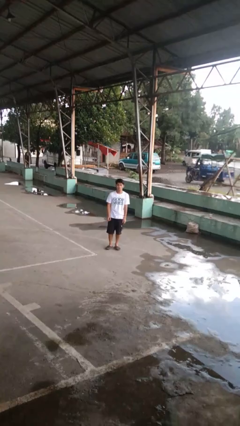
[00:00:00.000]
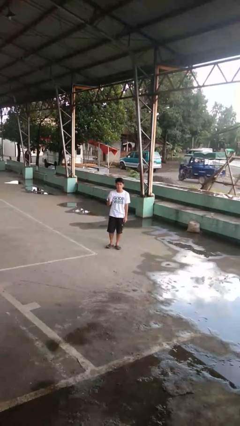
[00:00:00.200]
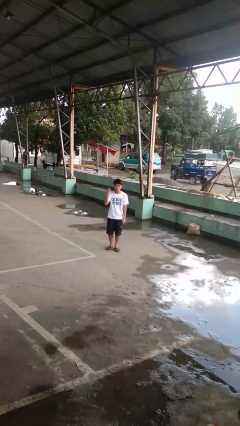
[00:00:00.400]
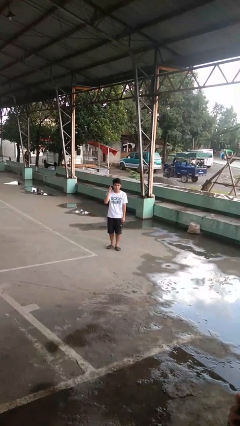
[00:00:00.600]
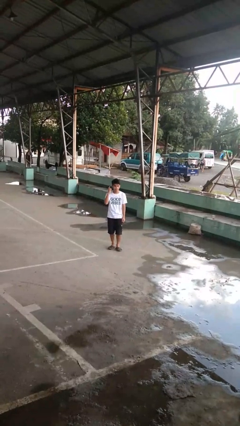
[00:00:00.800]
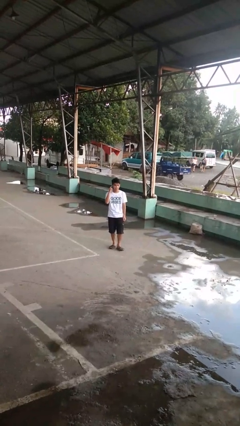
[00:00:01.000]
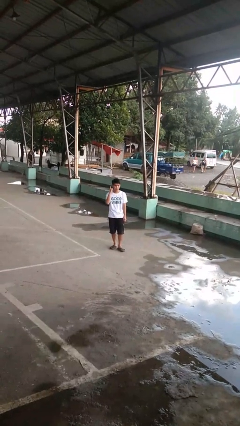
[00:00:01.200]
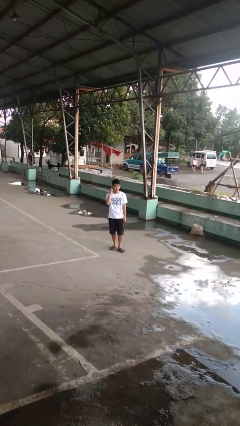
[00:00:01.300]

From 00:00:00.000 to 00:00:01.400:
person gestures listen closely

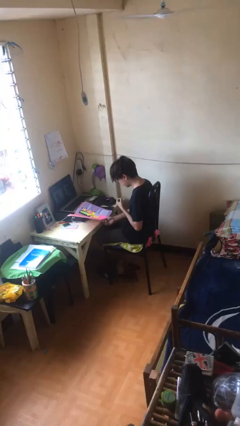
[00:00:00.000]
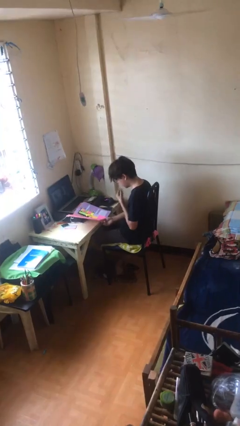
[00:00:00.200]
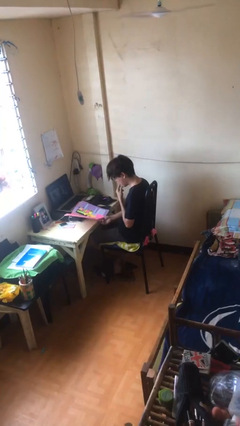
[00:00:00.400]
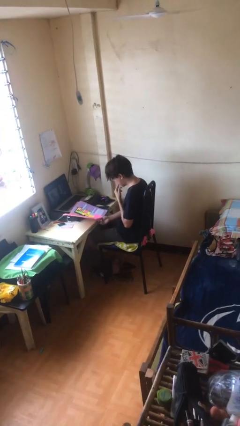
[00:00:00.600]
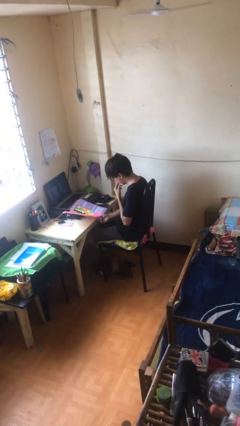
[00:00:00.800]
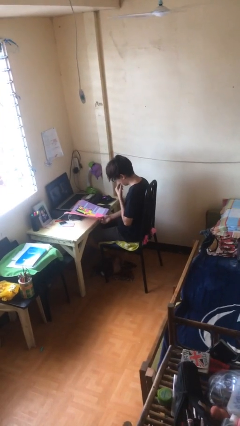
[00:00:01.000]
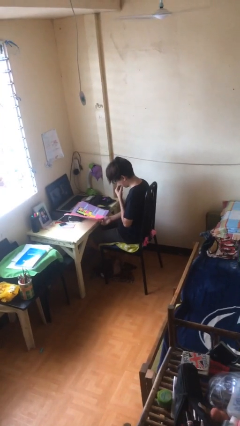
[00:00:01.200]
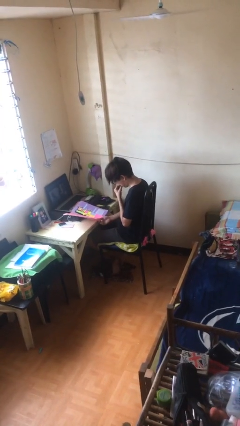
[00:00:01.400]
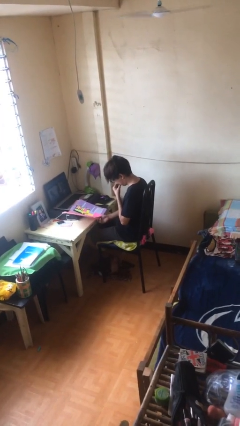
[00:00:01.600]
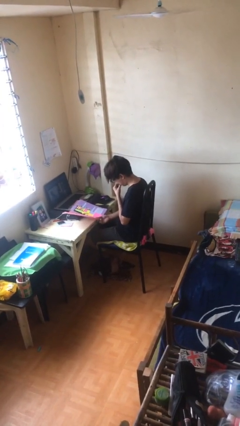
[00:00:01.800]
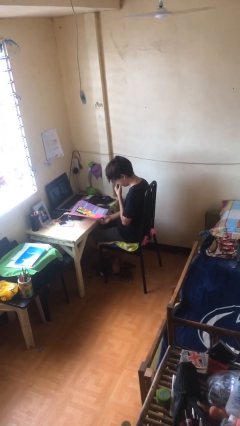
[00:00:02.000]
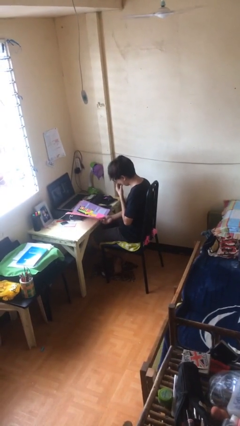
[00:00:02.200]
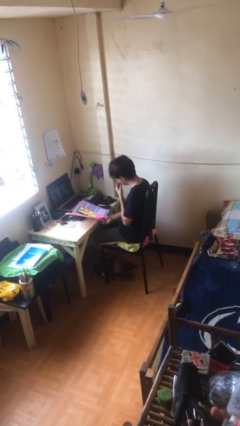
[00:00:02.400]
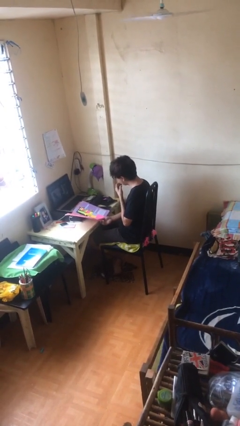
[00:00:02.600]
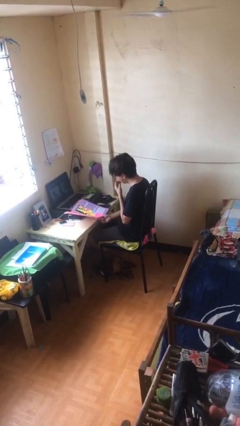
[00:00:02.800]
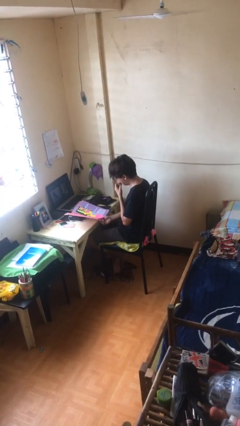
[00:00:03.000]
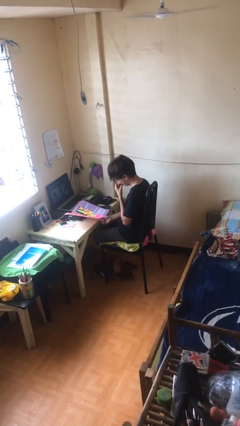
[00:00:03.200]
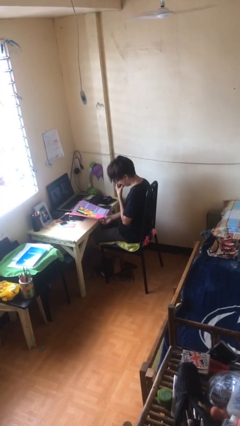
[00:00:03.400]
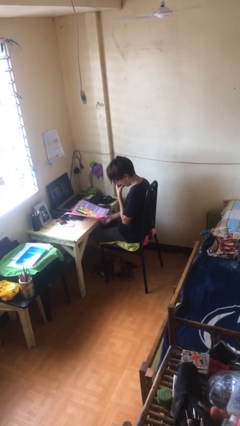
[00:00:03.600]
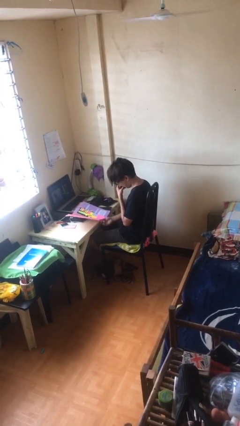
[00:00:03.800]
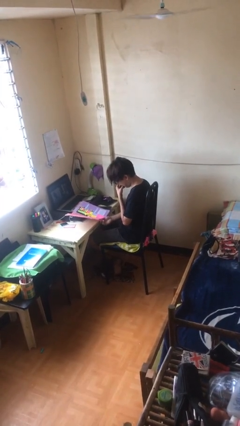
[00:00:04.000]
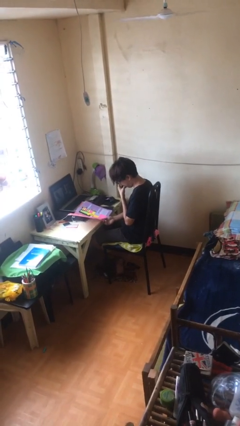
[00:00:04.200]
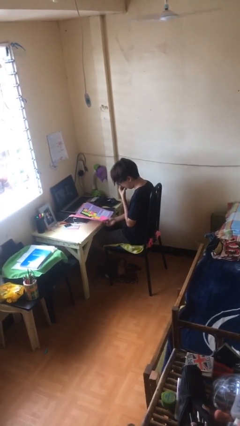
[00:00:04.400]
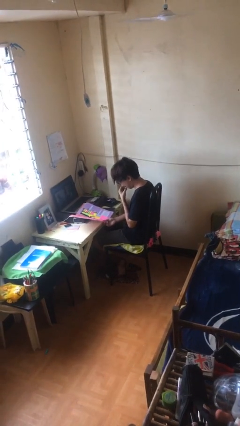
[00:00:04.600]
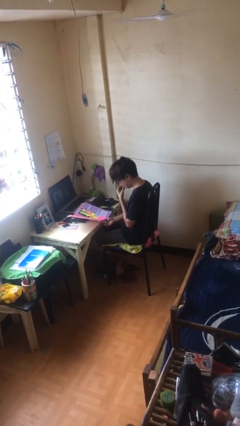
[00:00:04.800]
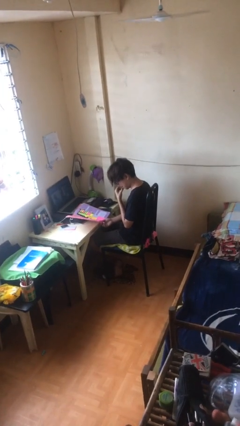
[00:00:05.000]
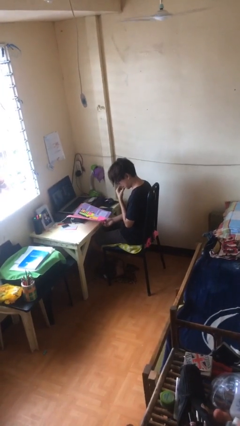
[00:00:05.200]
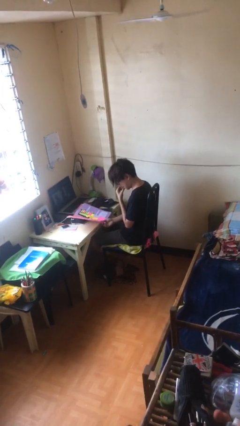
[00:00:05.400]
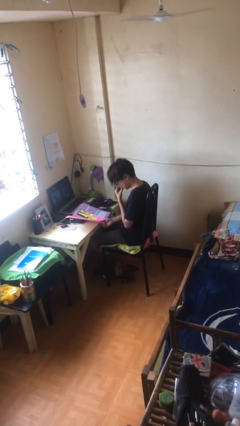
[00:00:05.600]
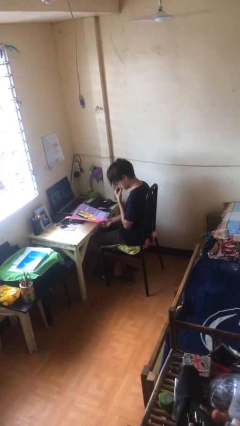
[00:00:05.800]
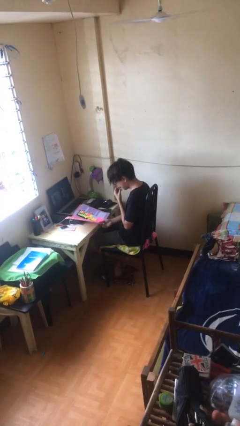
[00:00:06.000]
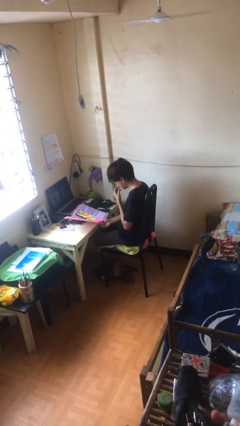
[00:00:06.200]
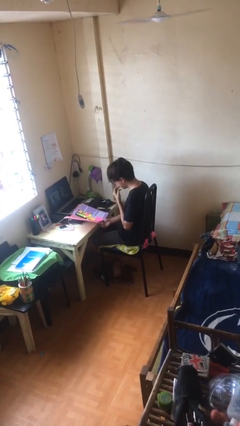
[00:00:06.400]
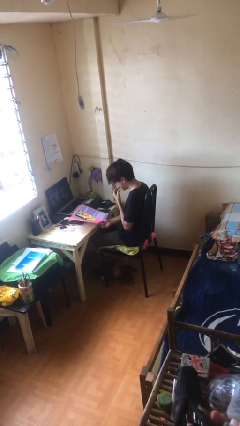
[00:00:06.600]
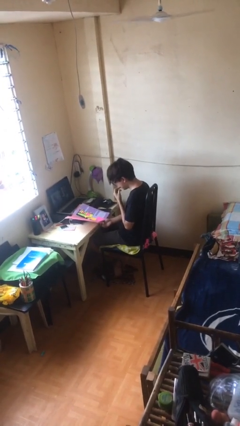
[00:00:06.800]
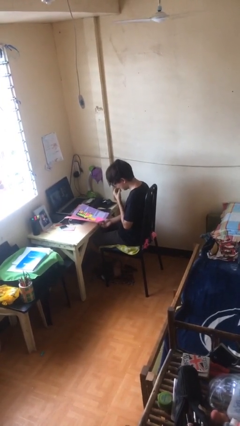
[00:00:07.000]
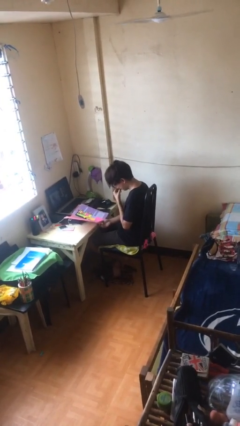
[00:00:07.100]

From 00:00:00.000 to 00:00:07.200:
person reads document

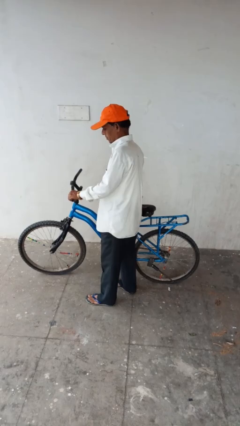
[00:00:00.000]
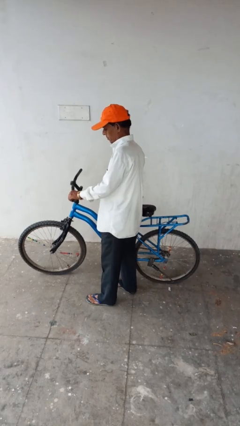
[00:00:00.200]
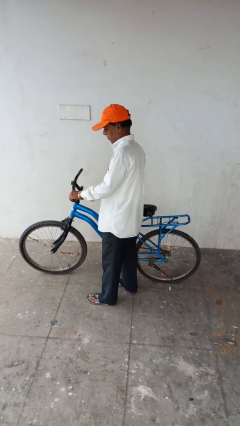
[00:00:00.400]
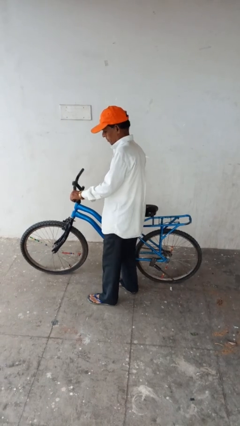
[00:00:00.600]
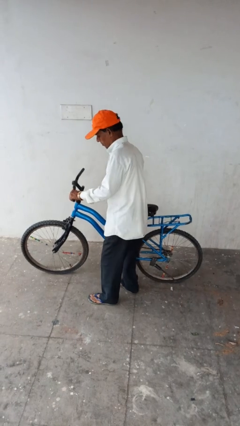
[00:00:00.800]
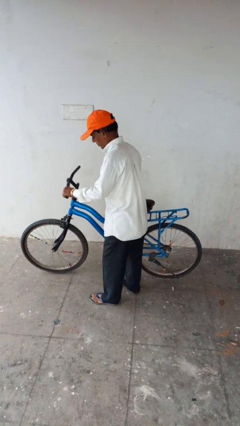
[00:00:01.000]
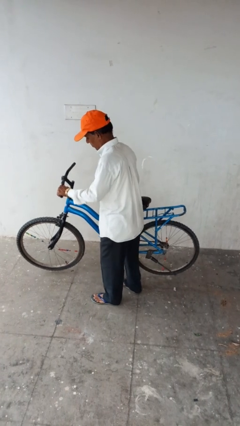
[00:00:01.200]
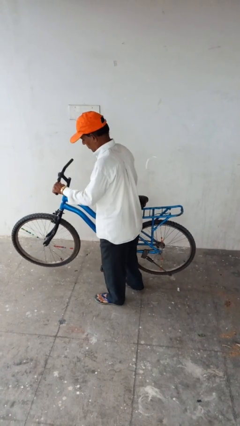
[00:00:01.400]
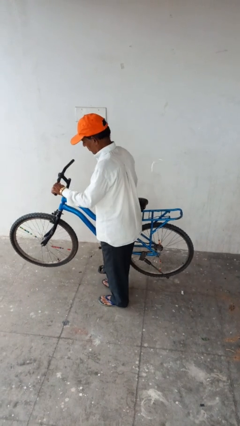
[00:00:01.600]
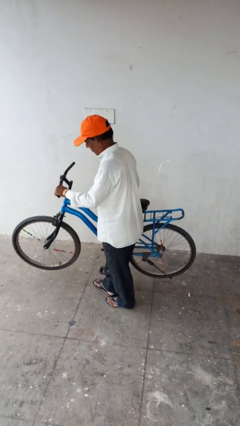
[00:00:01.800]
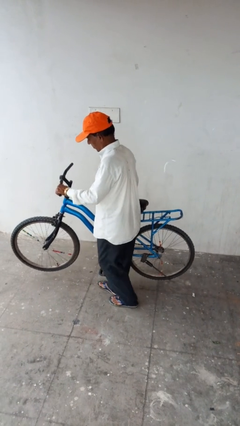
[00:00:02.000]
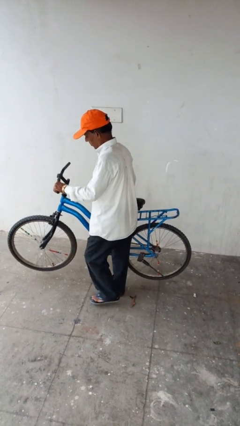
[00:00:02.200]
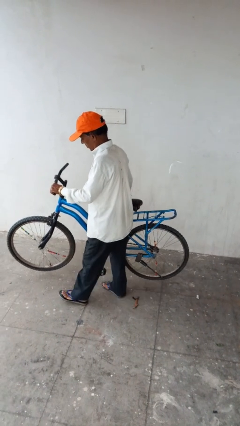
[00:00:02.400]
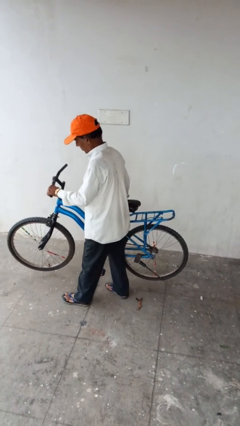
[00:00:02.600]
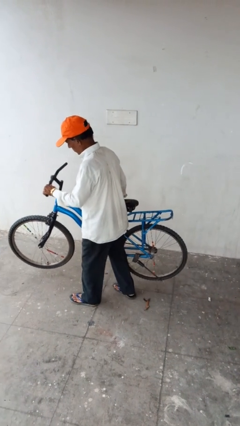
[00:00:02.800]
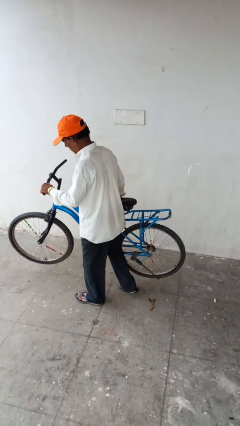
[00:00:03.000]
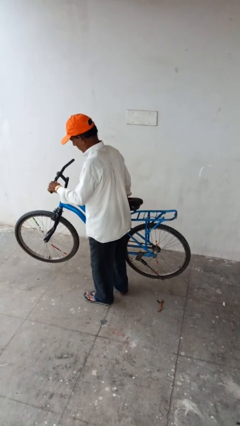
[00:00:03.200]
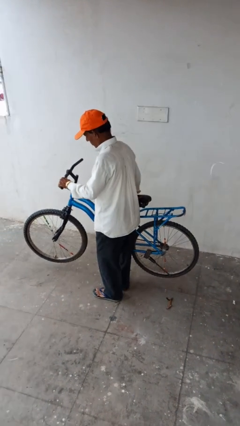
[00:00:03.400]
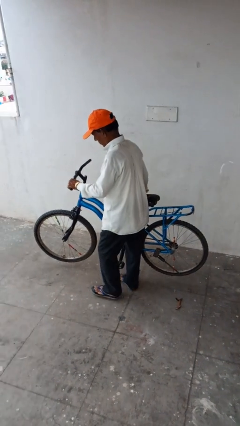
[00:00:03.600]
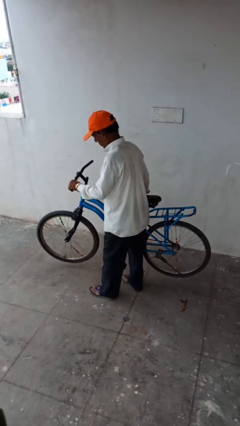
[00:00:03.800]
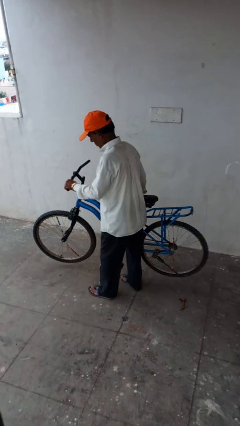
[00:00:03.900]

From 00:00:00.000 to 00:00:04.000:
person carries bicycle

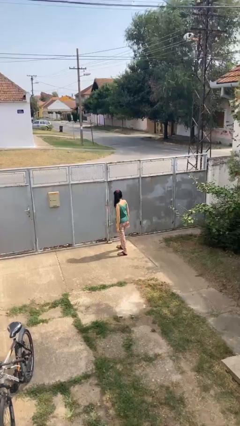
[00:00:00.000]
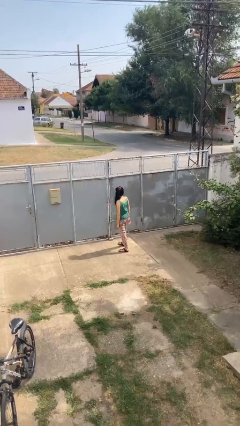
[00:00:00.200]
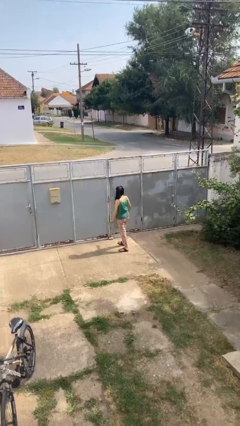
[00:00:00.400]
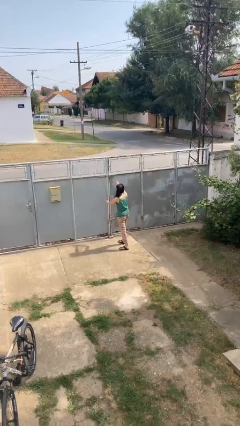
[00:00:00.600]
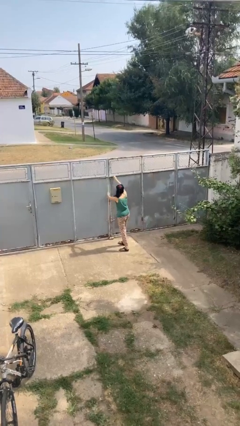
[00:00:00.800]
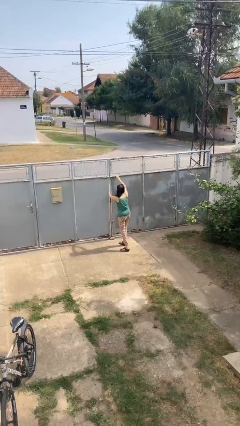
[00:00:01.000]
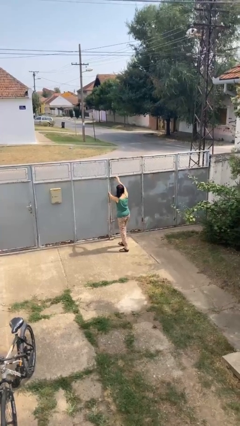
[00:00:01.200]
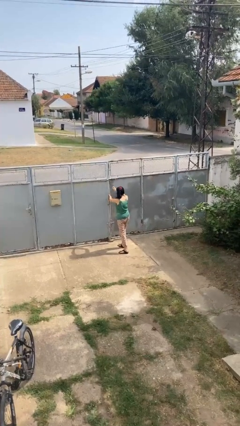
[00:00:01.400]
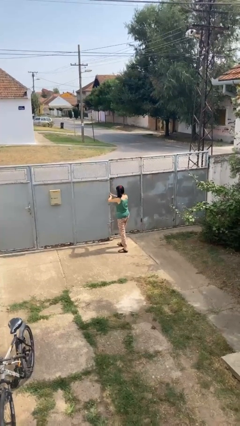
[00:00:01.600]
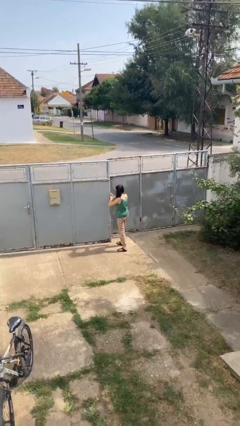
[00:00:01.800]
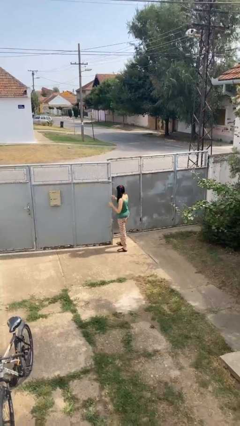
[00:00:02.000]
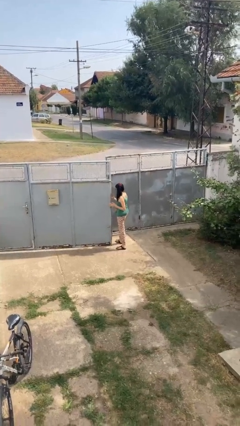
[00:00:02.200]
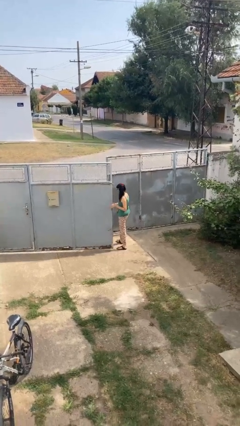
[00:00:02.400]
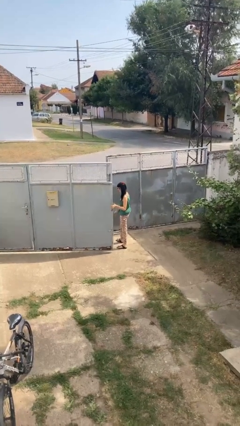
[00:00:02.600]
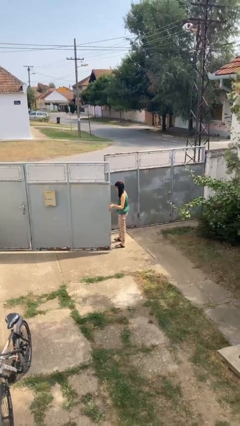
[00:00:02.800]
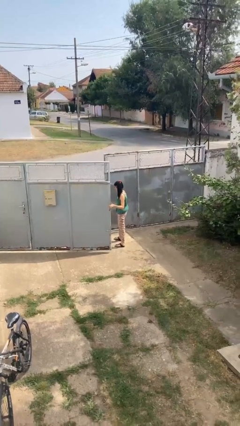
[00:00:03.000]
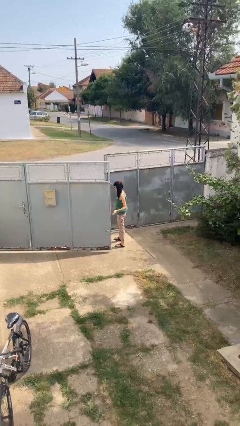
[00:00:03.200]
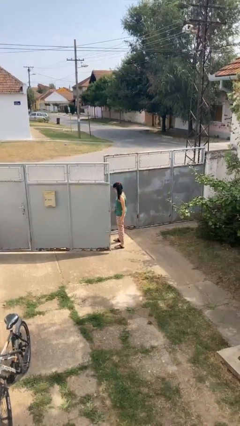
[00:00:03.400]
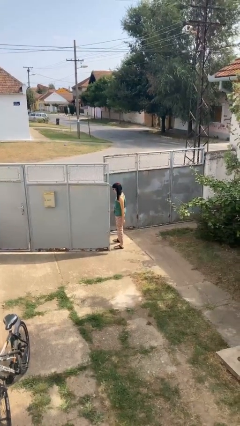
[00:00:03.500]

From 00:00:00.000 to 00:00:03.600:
person opens gate

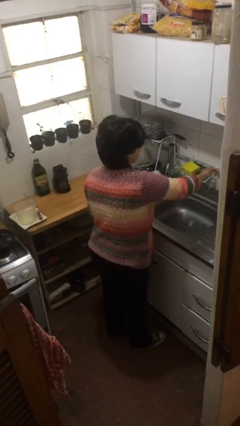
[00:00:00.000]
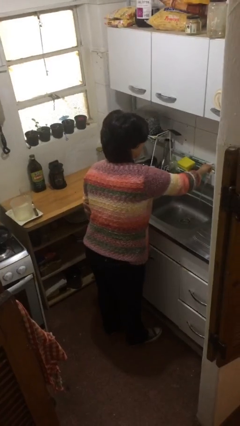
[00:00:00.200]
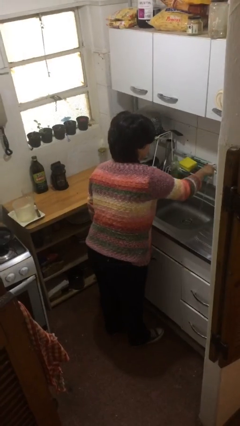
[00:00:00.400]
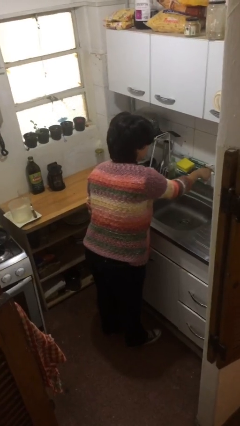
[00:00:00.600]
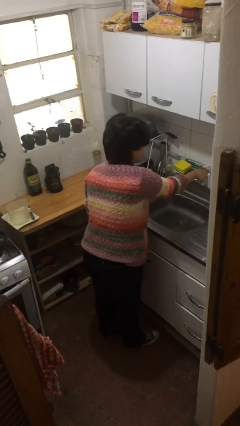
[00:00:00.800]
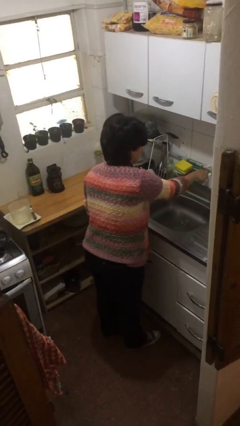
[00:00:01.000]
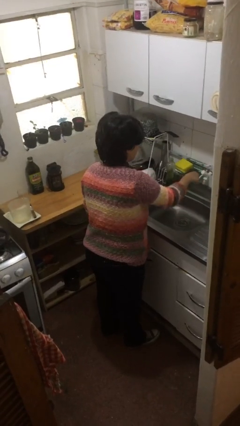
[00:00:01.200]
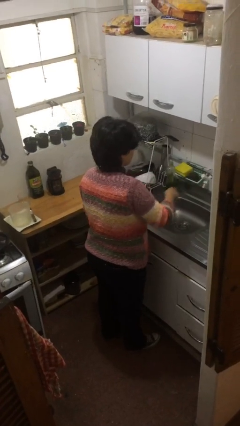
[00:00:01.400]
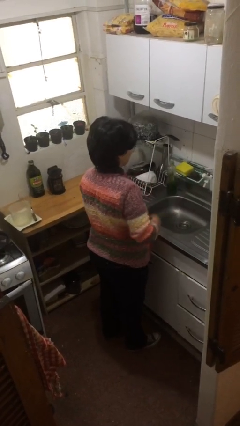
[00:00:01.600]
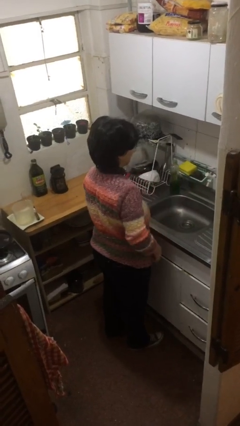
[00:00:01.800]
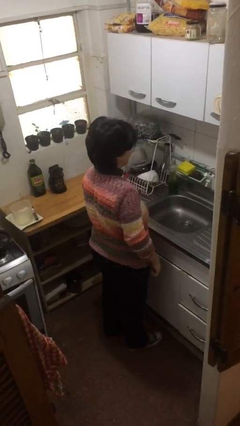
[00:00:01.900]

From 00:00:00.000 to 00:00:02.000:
person turns off faucet
